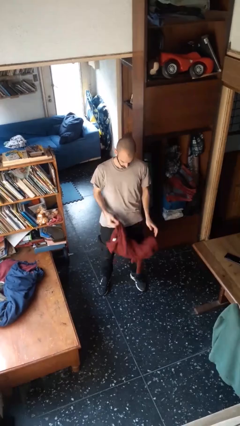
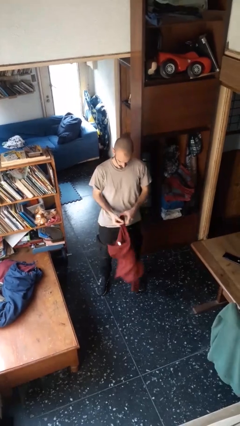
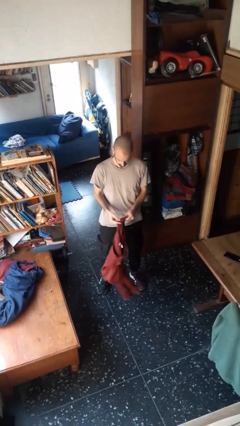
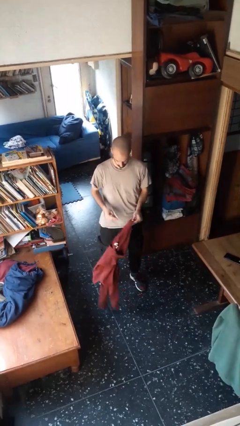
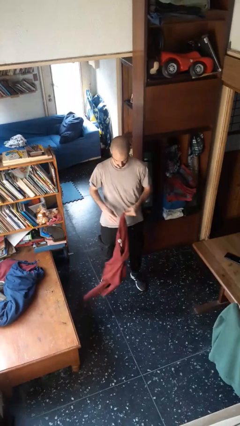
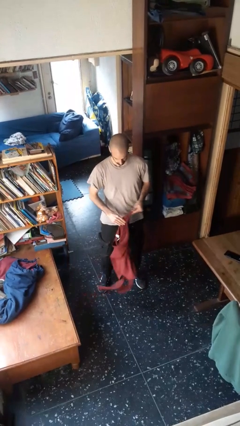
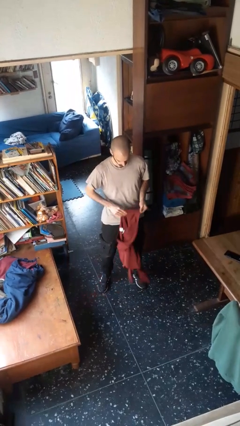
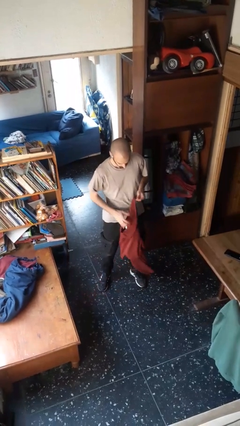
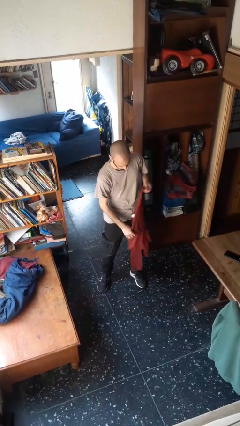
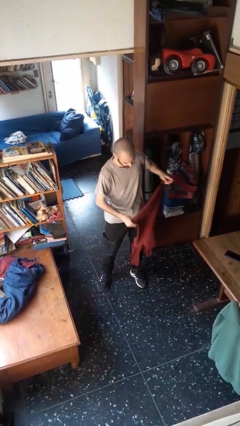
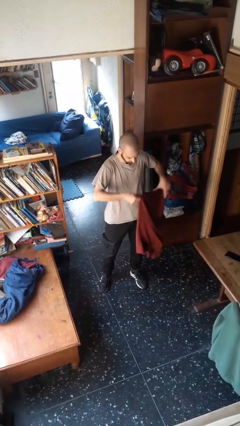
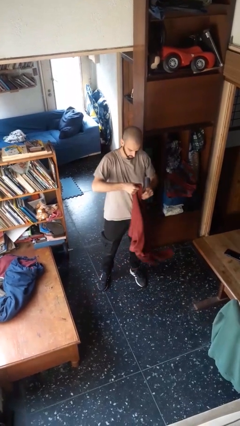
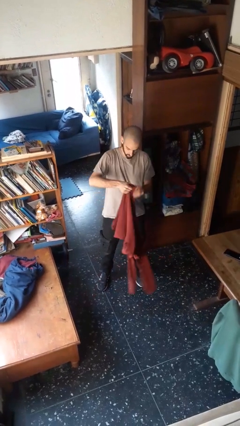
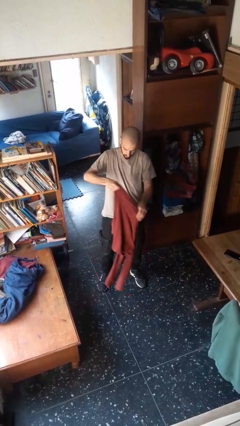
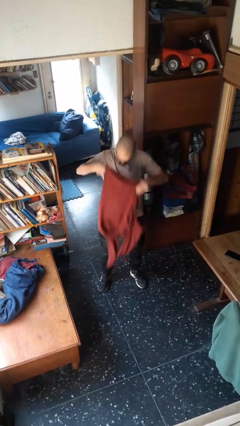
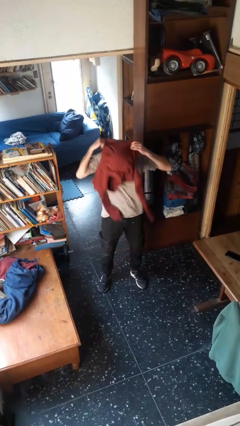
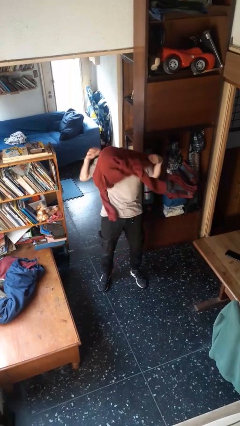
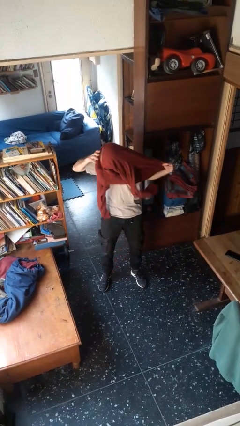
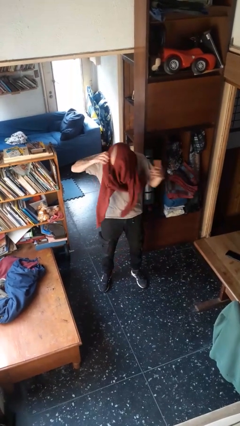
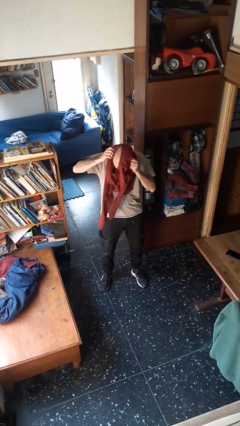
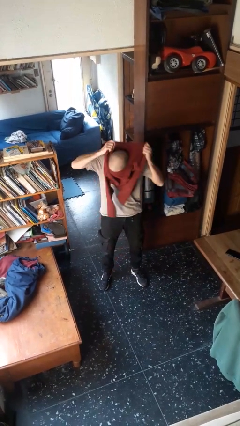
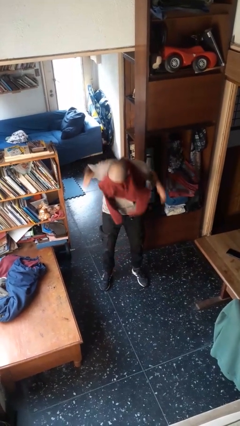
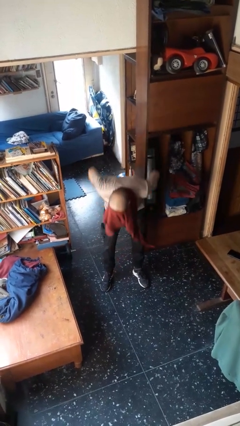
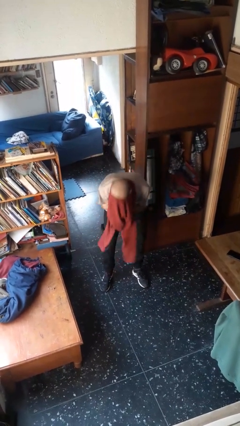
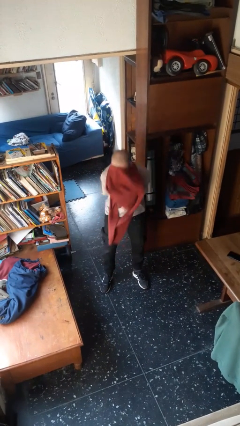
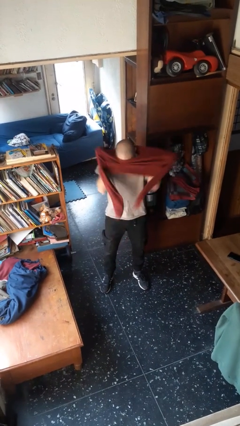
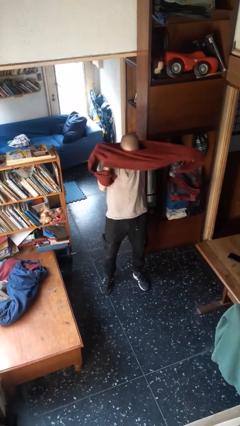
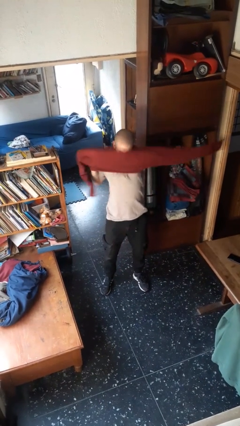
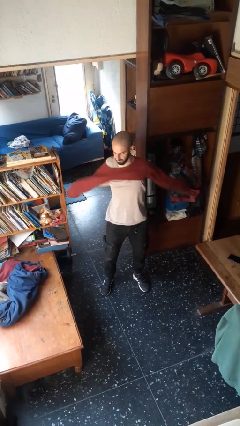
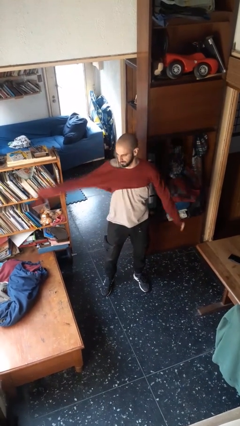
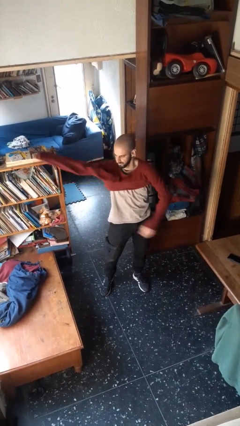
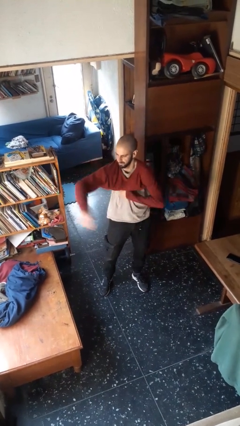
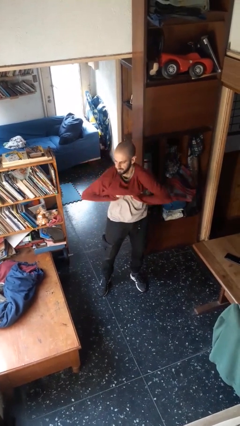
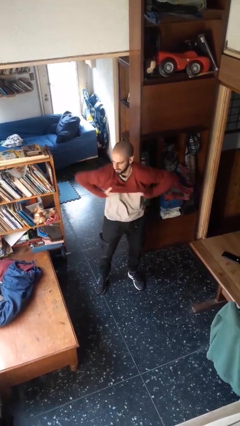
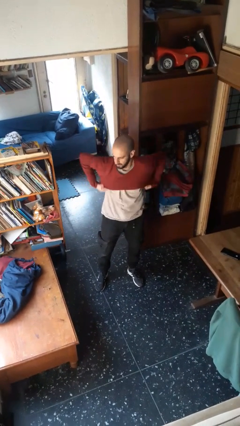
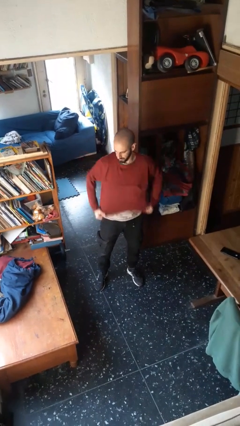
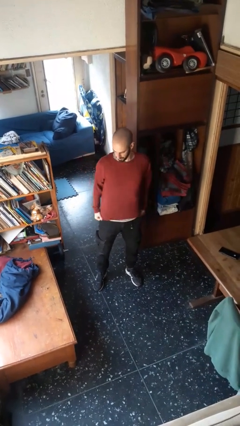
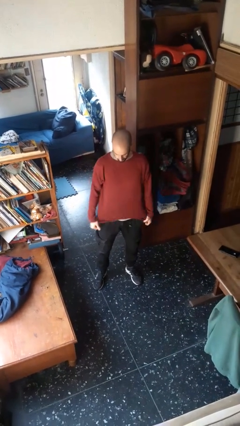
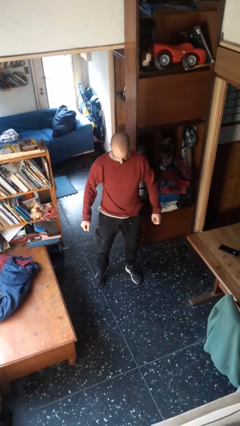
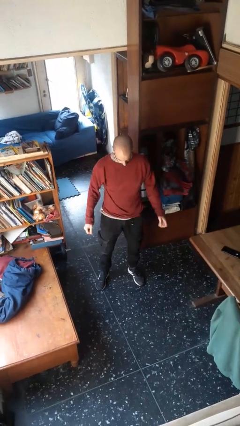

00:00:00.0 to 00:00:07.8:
person puts on shirt

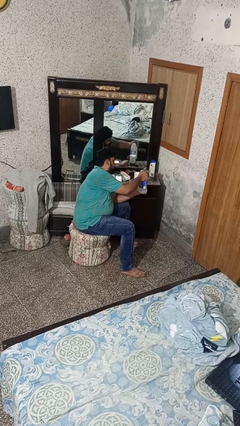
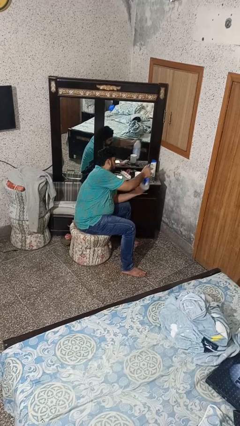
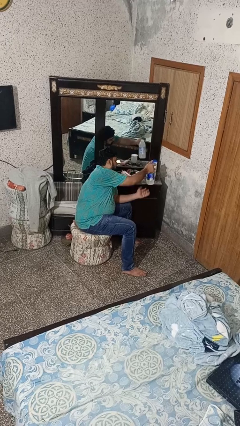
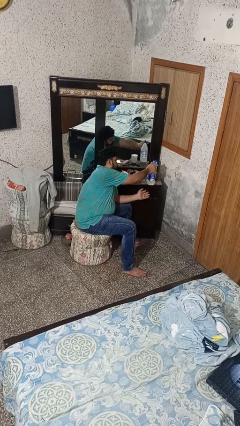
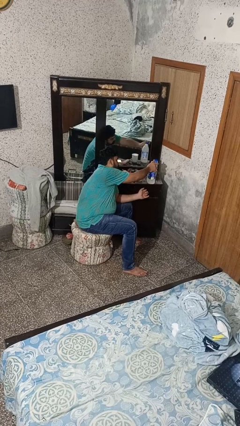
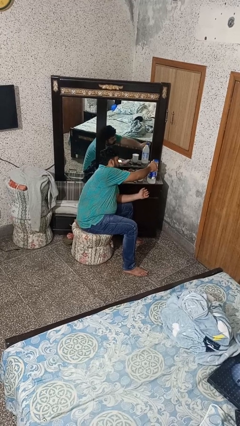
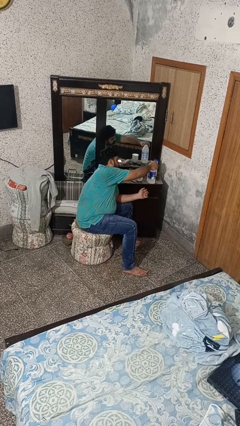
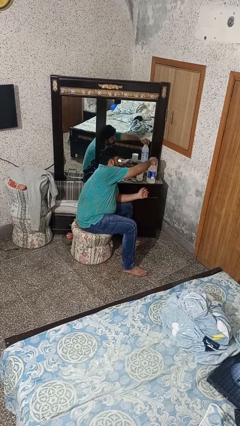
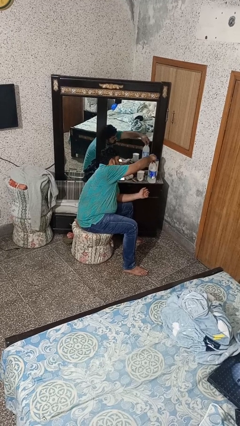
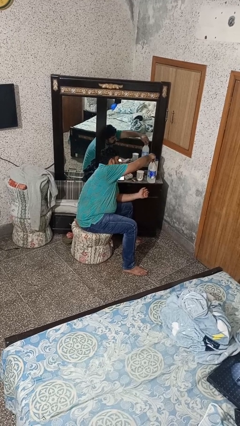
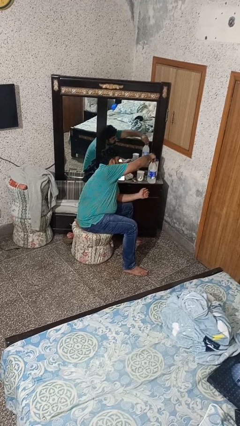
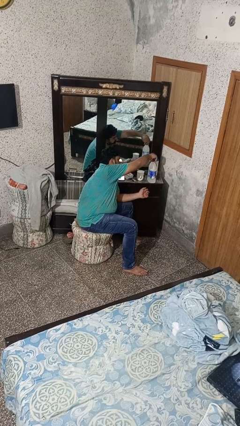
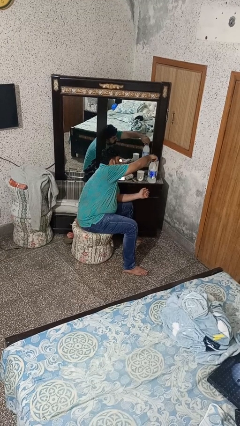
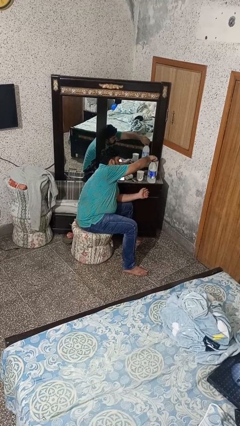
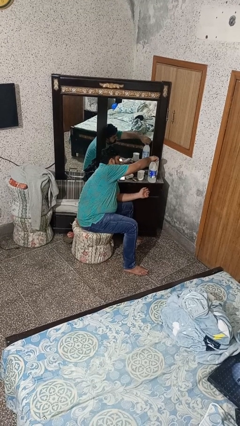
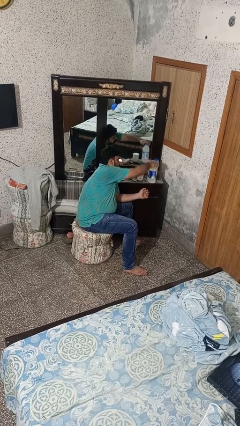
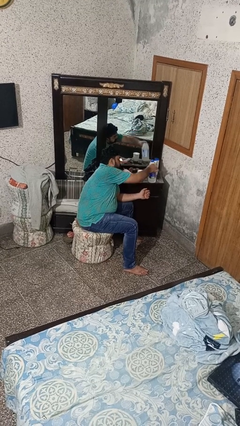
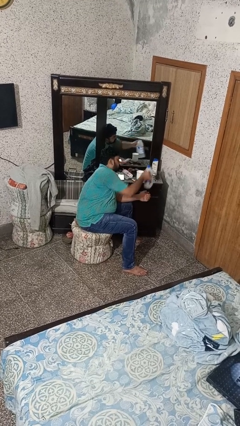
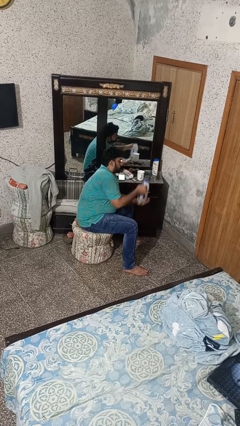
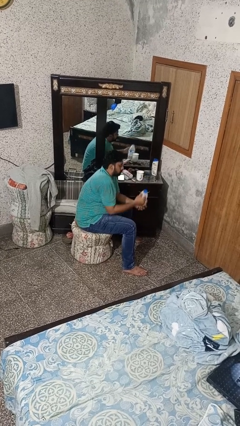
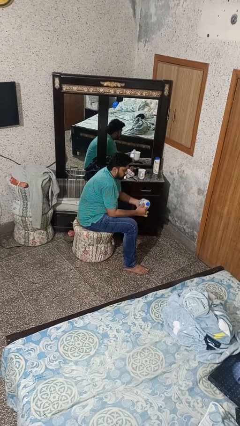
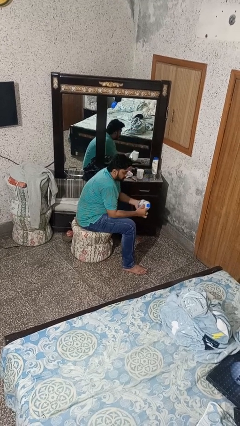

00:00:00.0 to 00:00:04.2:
person screws lid to bottle

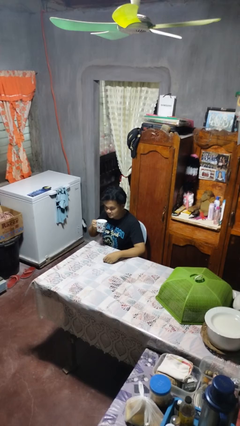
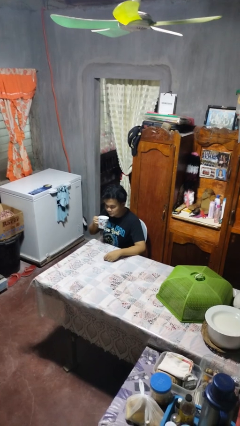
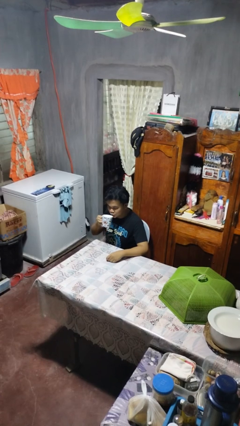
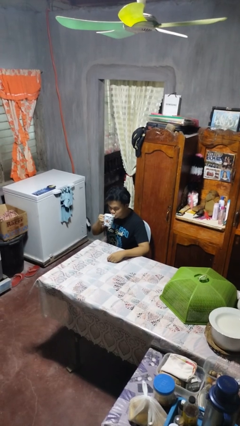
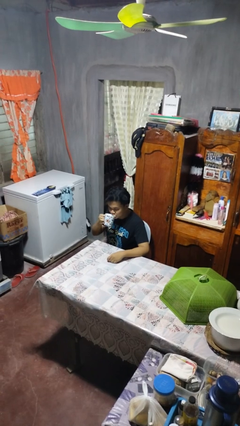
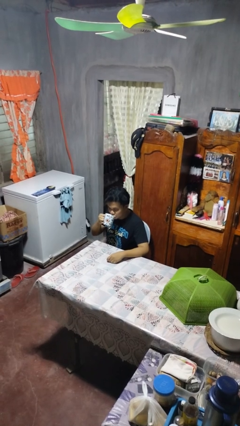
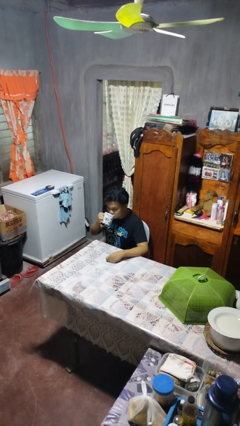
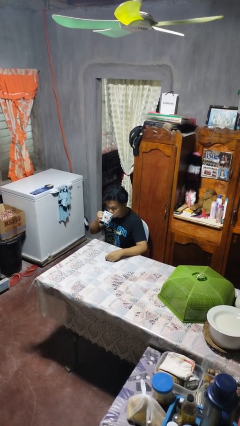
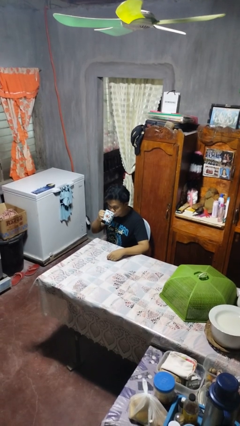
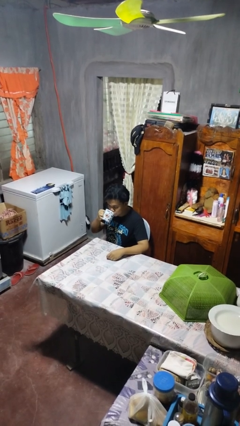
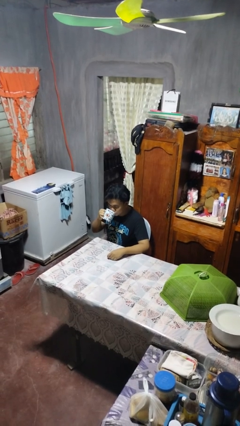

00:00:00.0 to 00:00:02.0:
person drinks from mug

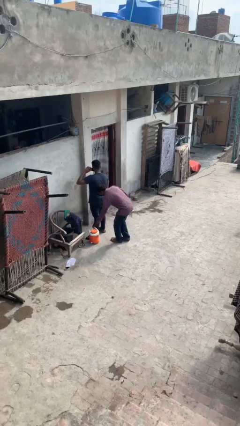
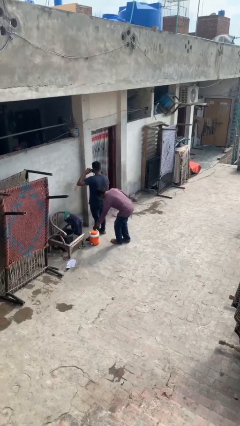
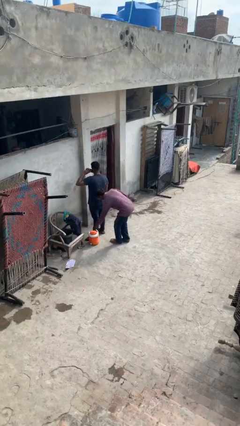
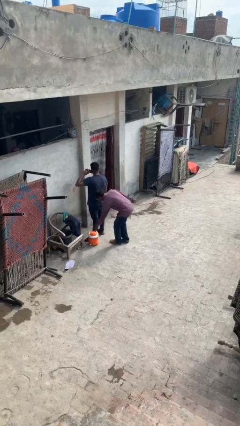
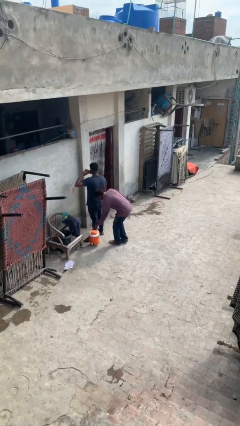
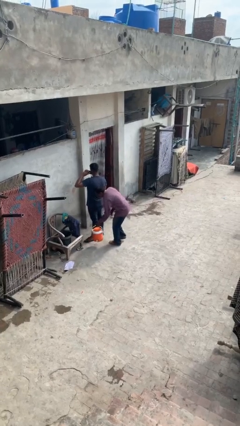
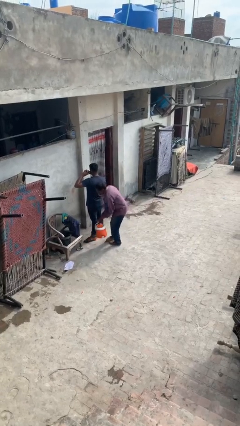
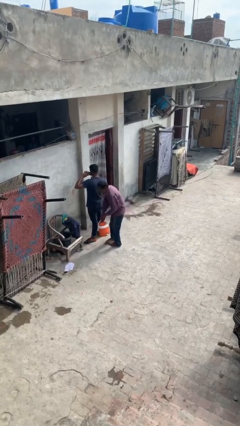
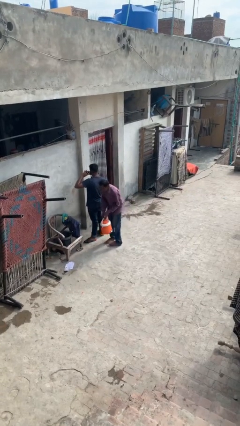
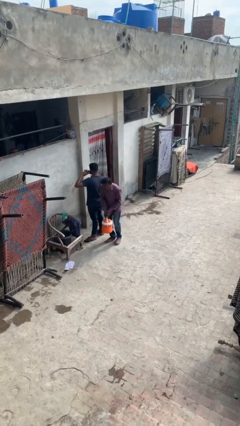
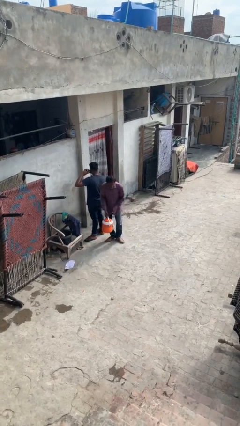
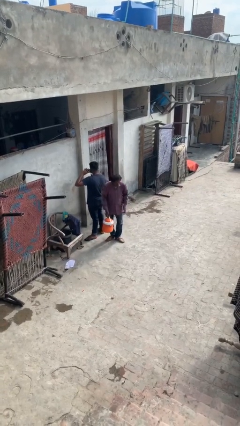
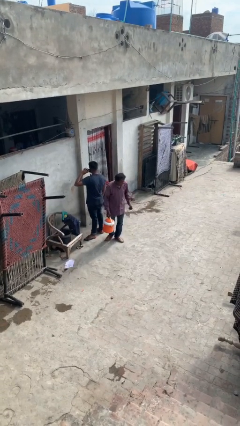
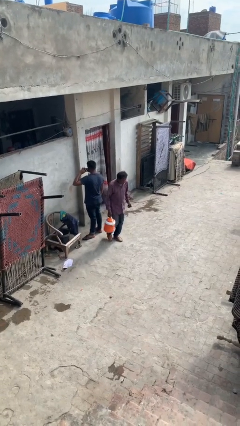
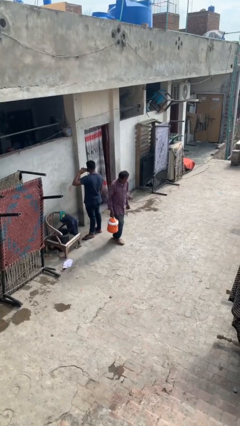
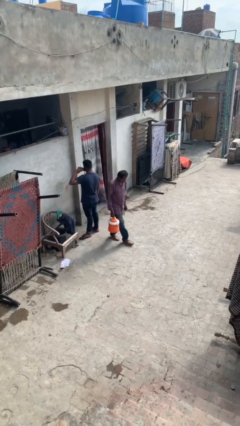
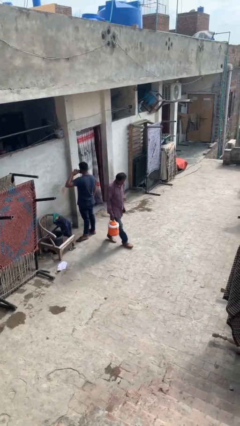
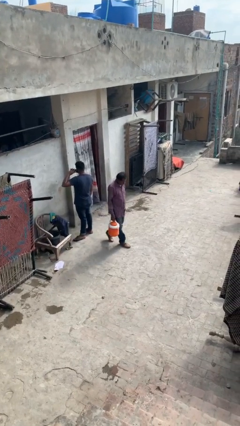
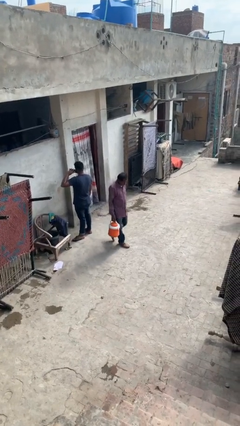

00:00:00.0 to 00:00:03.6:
person steals object from person

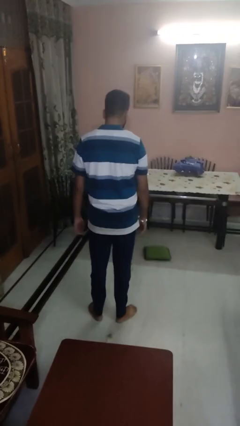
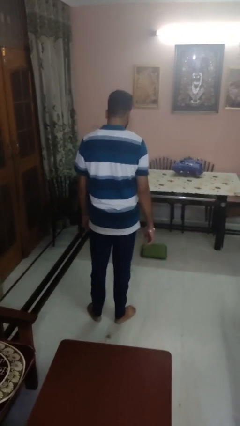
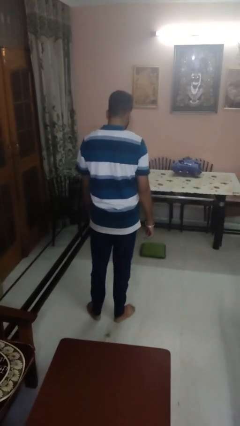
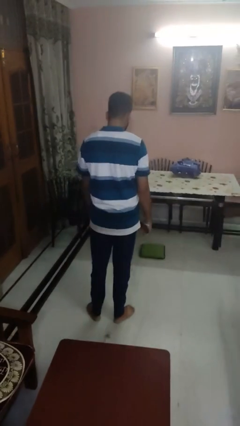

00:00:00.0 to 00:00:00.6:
person throws object to ground
